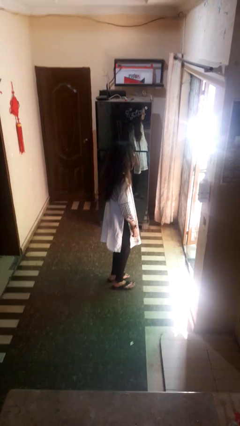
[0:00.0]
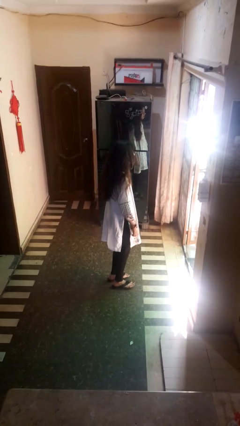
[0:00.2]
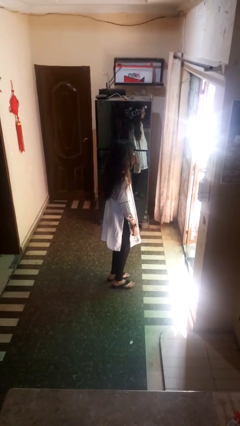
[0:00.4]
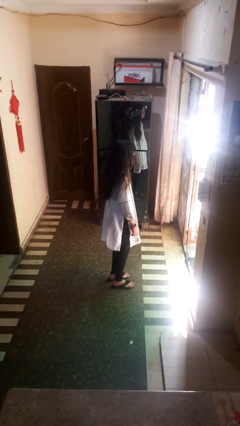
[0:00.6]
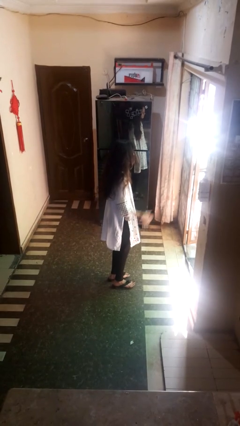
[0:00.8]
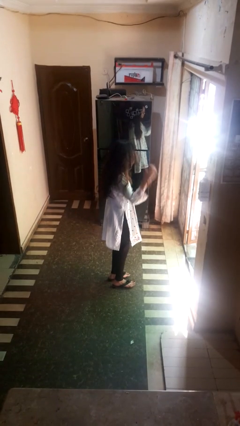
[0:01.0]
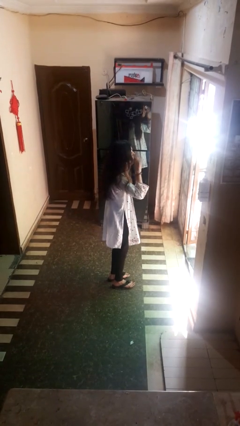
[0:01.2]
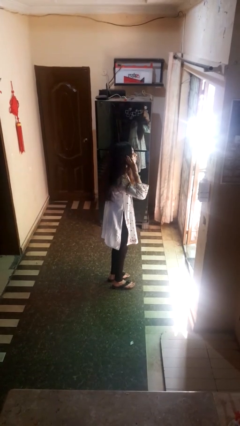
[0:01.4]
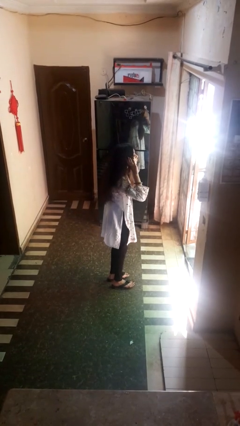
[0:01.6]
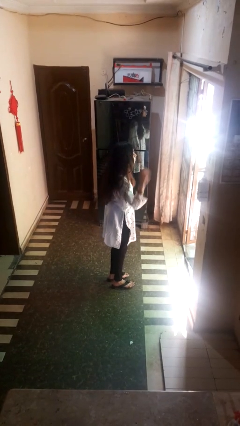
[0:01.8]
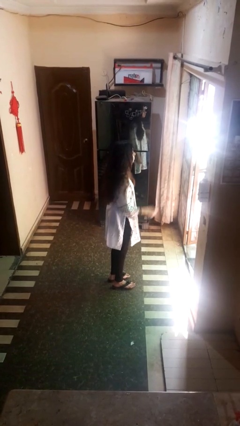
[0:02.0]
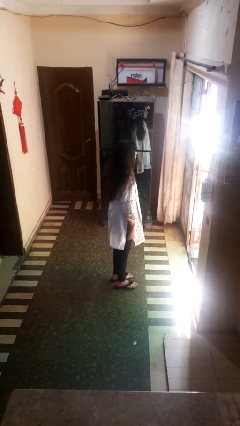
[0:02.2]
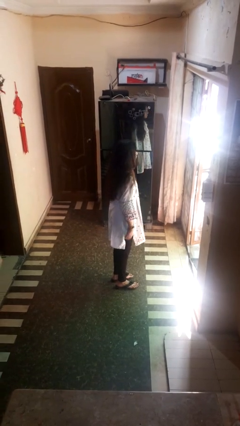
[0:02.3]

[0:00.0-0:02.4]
person gestures listen closely

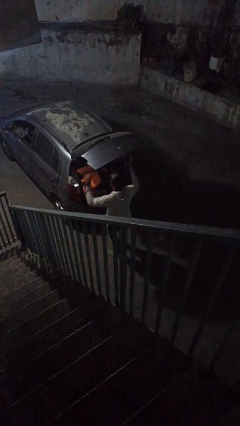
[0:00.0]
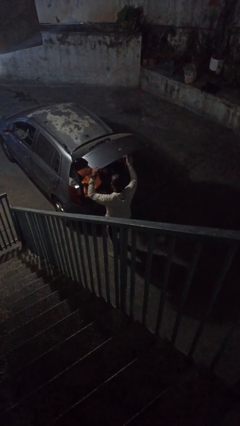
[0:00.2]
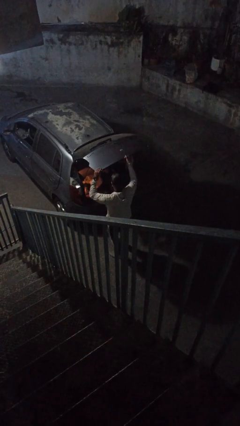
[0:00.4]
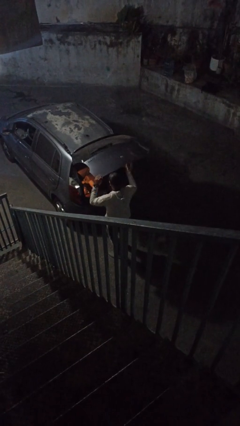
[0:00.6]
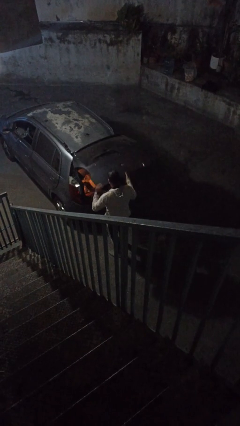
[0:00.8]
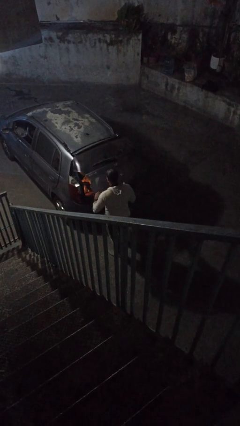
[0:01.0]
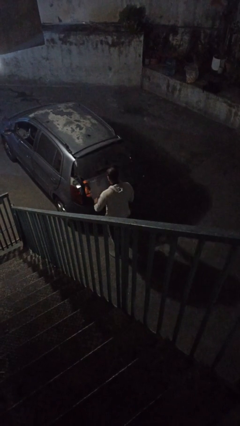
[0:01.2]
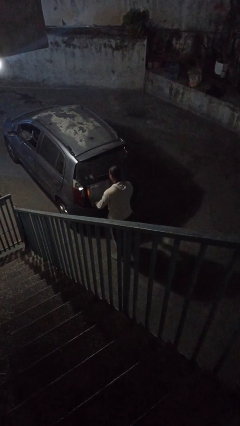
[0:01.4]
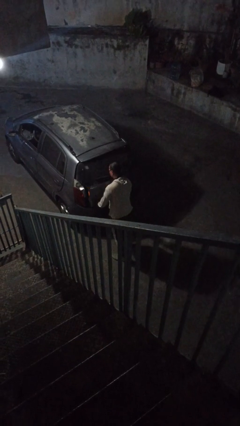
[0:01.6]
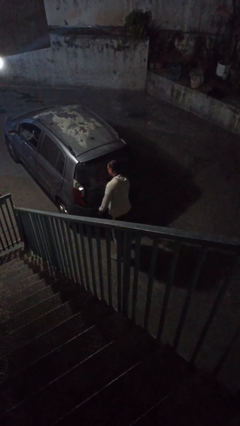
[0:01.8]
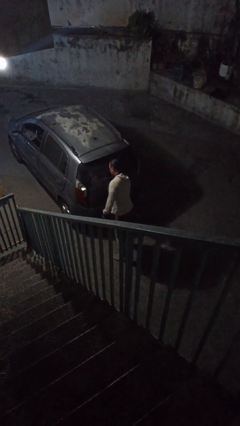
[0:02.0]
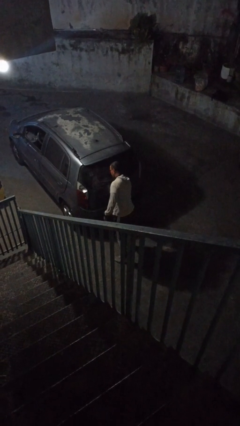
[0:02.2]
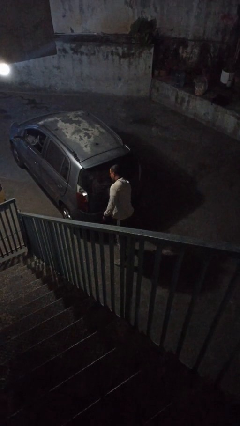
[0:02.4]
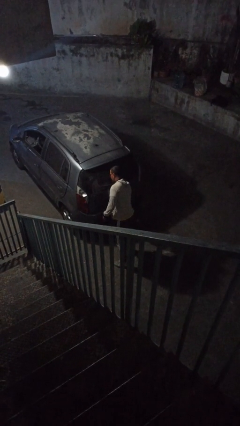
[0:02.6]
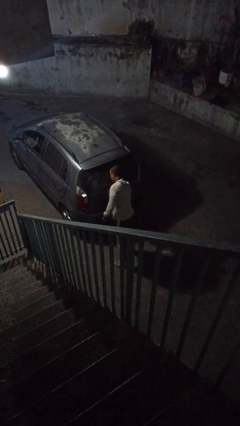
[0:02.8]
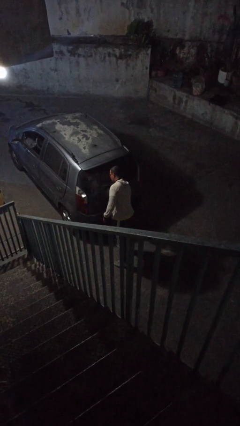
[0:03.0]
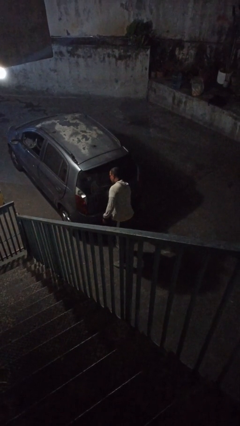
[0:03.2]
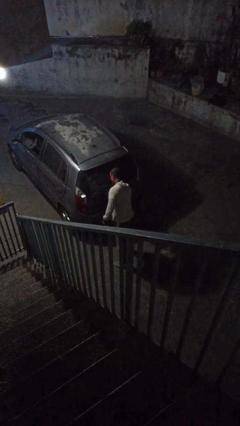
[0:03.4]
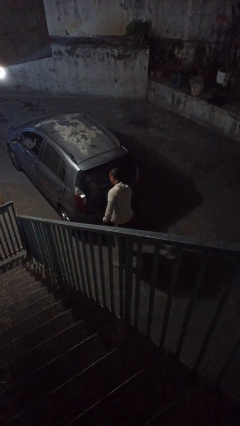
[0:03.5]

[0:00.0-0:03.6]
person closes car trunk

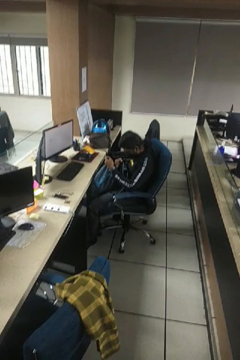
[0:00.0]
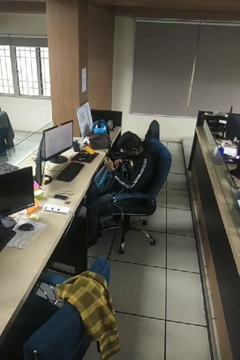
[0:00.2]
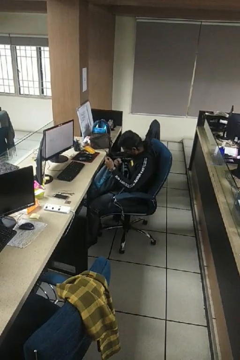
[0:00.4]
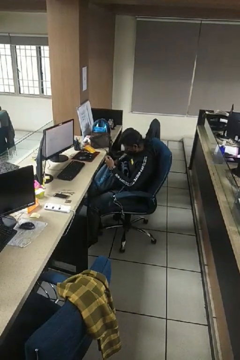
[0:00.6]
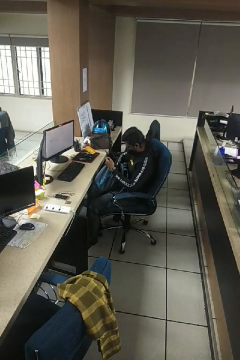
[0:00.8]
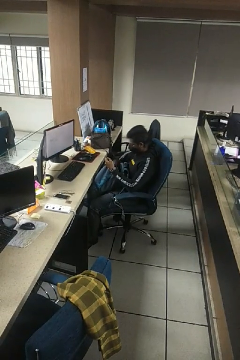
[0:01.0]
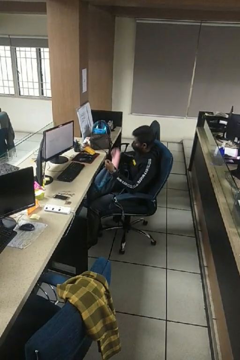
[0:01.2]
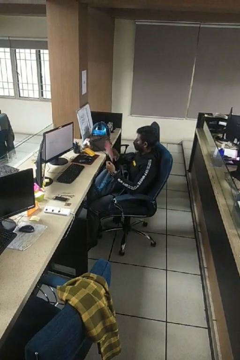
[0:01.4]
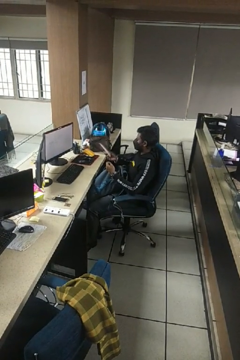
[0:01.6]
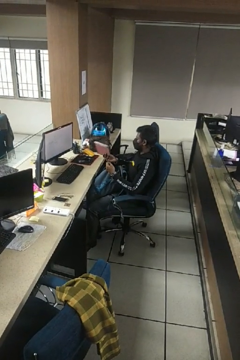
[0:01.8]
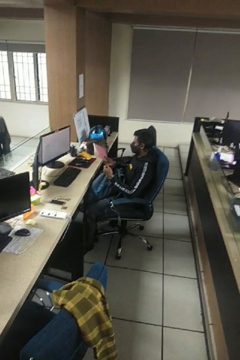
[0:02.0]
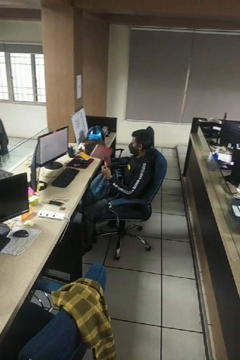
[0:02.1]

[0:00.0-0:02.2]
person takes object from backpack

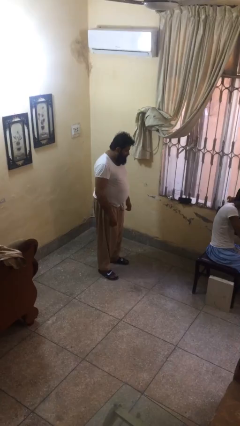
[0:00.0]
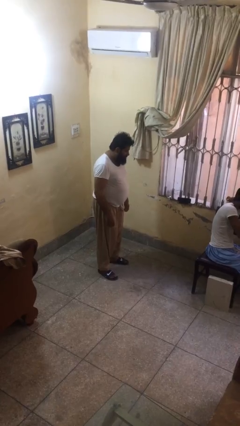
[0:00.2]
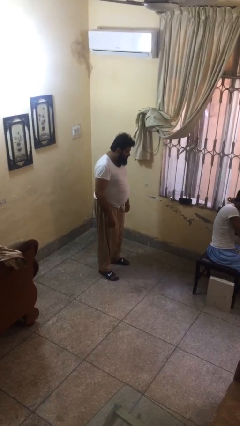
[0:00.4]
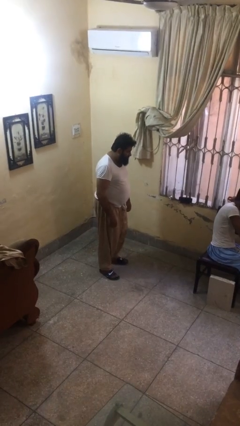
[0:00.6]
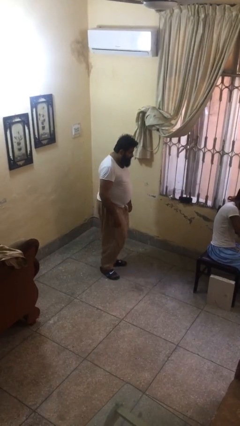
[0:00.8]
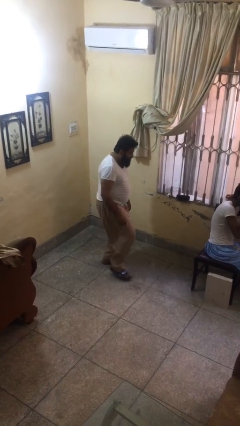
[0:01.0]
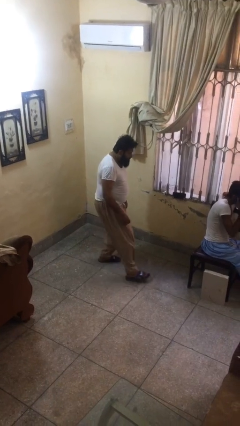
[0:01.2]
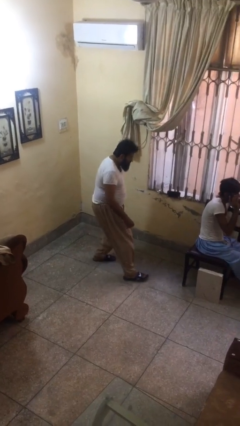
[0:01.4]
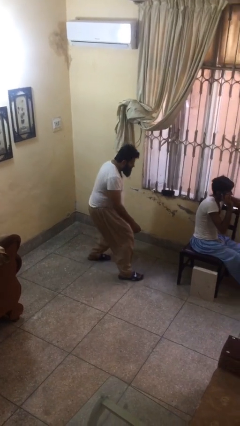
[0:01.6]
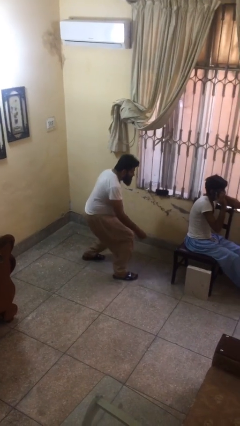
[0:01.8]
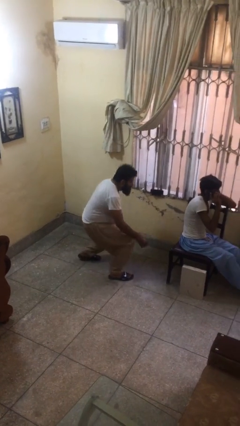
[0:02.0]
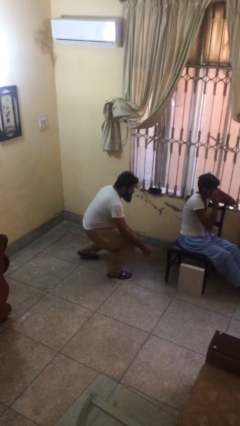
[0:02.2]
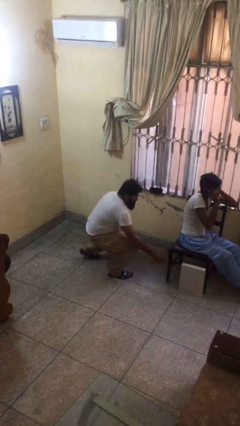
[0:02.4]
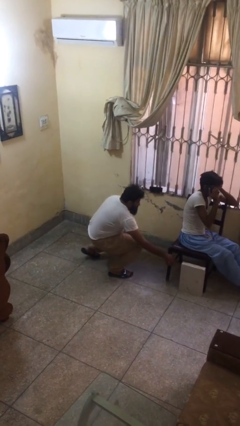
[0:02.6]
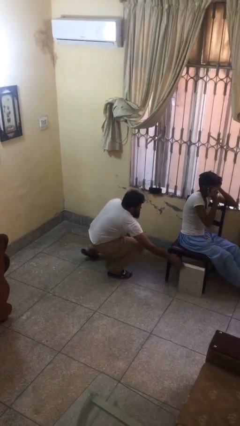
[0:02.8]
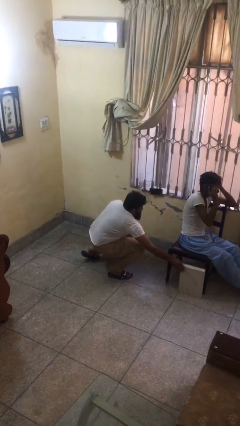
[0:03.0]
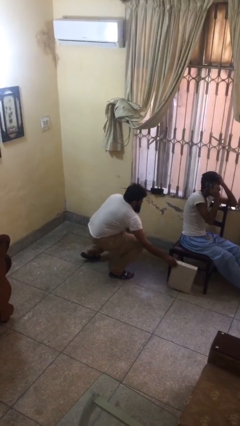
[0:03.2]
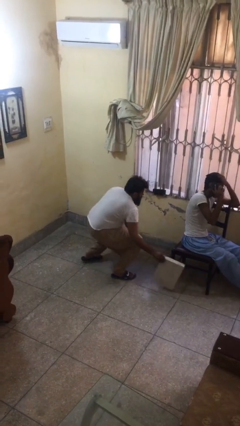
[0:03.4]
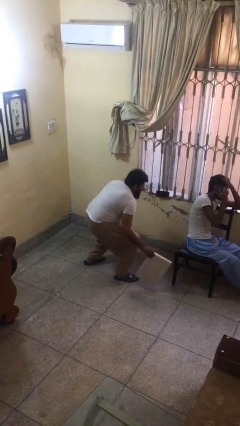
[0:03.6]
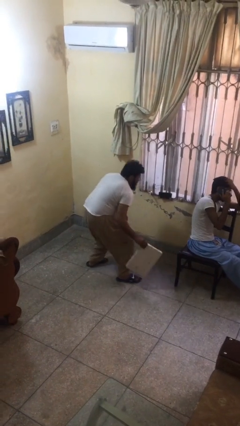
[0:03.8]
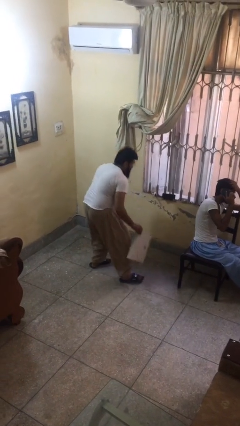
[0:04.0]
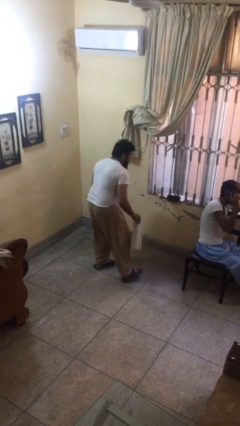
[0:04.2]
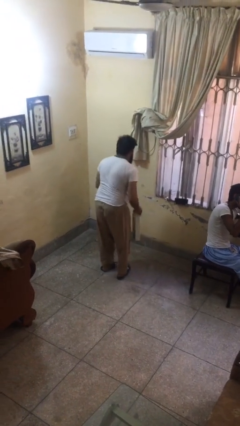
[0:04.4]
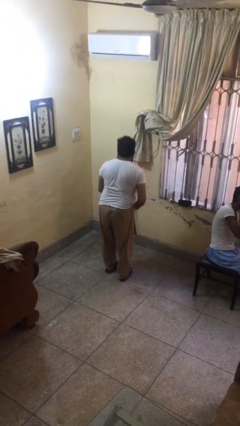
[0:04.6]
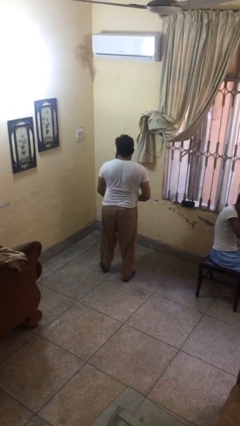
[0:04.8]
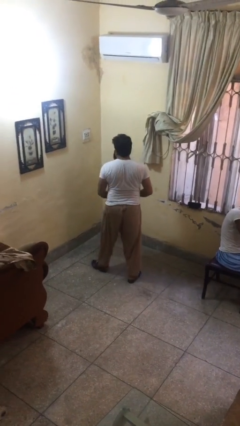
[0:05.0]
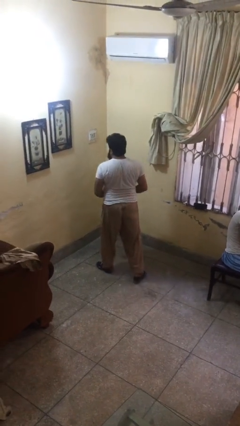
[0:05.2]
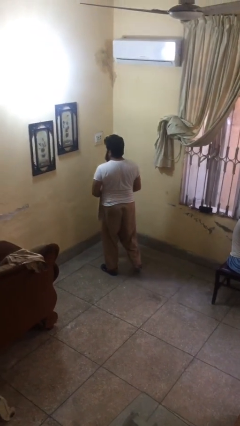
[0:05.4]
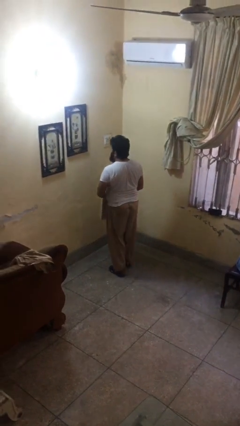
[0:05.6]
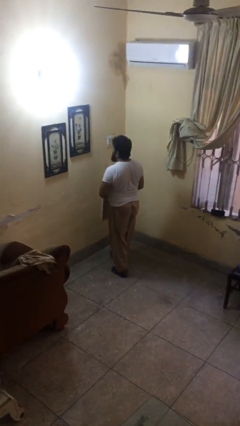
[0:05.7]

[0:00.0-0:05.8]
person steals object from person

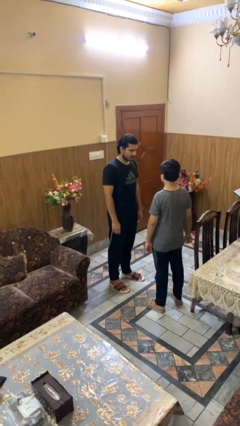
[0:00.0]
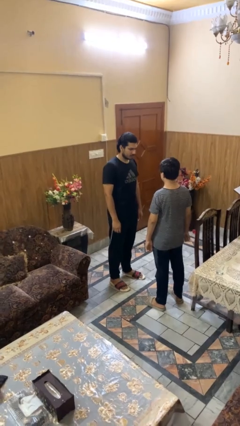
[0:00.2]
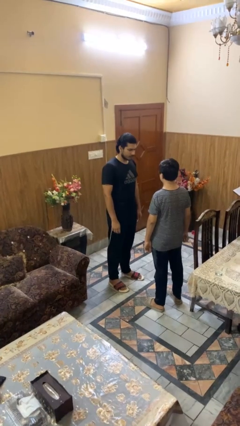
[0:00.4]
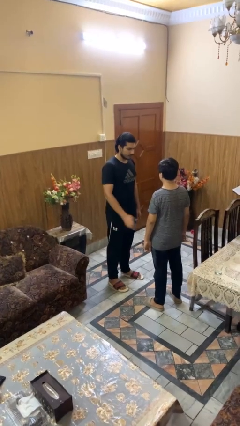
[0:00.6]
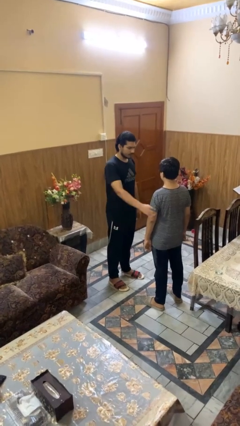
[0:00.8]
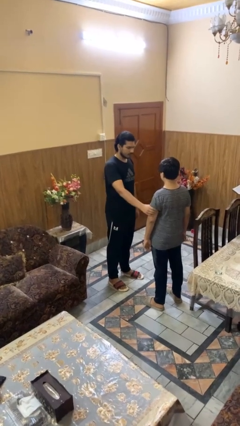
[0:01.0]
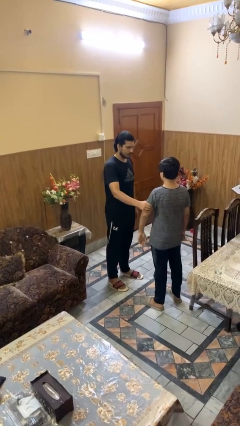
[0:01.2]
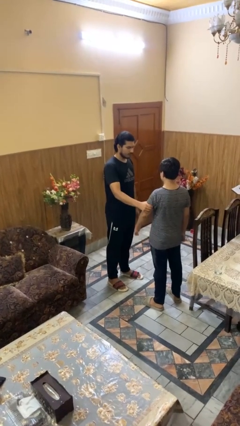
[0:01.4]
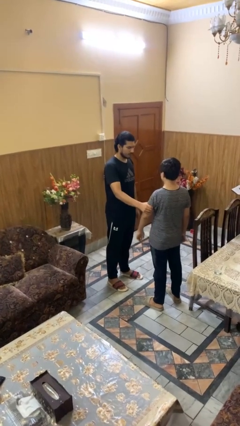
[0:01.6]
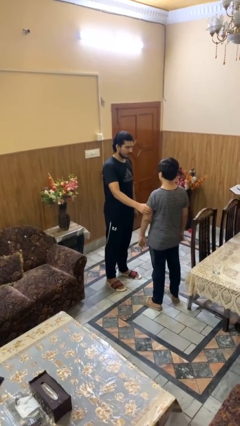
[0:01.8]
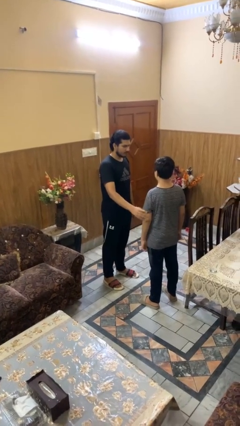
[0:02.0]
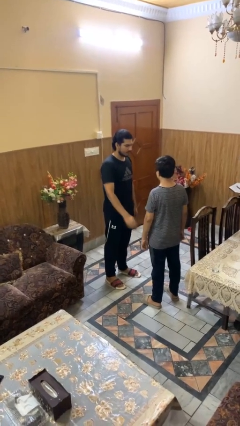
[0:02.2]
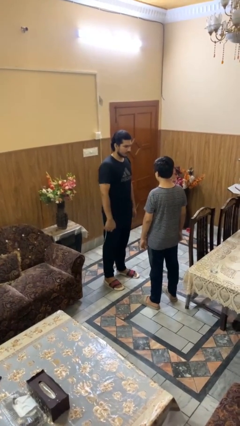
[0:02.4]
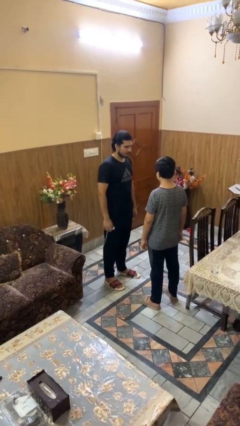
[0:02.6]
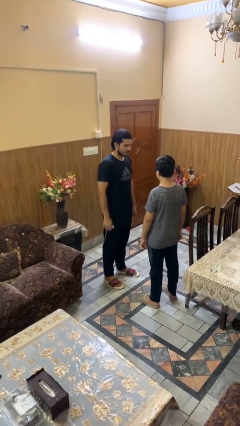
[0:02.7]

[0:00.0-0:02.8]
person grabs person by bicep

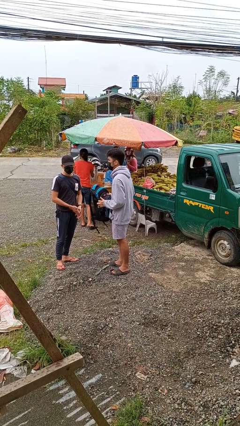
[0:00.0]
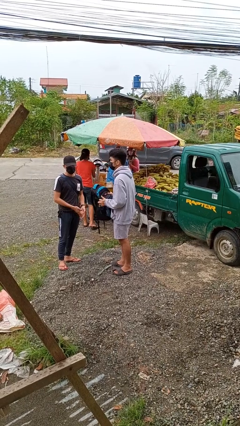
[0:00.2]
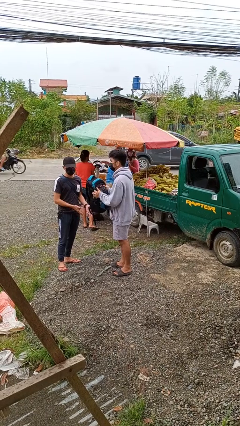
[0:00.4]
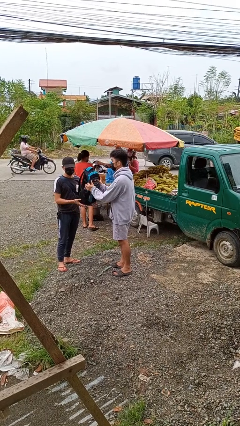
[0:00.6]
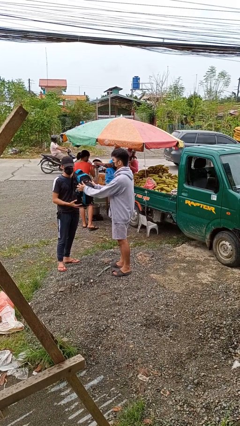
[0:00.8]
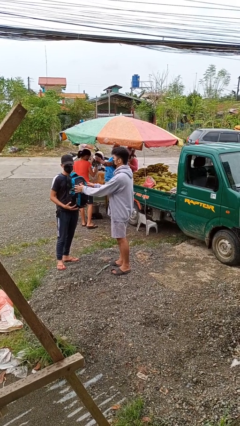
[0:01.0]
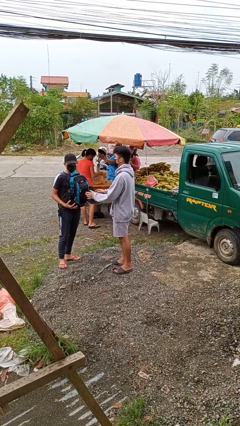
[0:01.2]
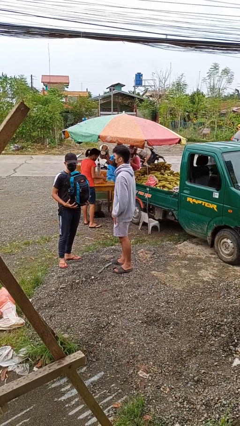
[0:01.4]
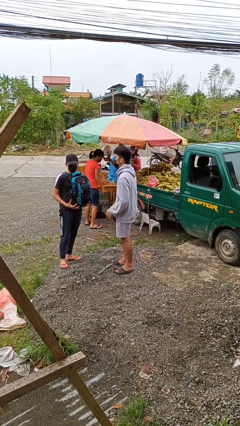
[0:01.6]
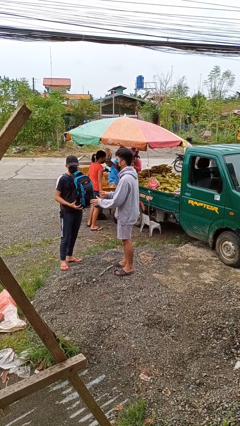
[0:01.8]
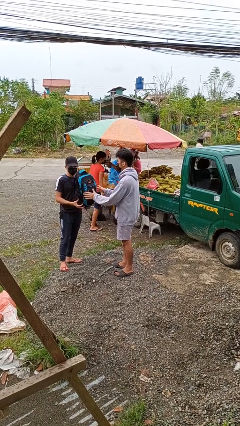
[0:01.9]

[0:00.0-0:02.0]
person transfers object to person
